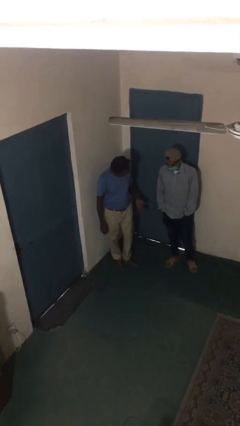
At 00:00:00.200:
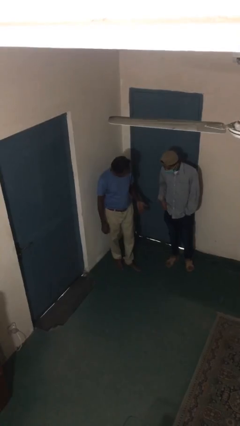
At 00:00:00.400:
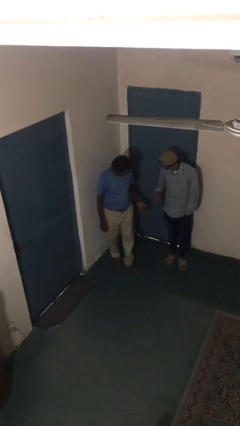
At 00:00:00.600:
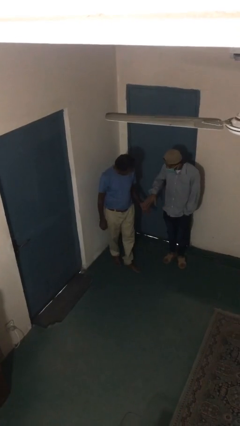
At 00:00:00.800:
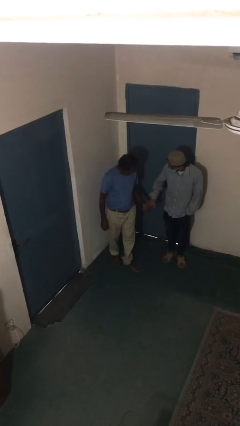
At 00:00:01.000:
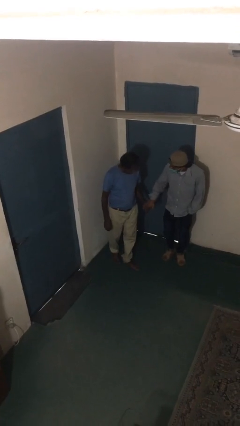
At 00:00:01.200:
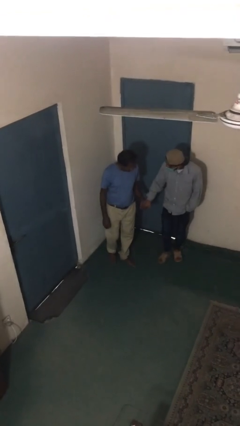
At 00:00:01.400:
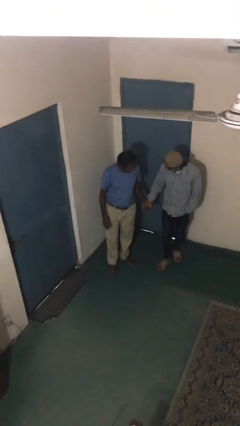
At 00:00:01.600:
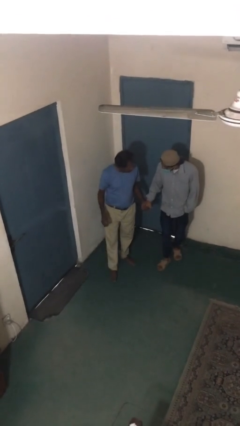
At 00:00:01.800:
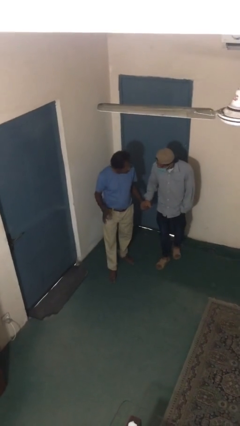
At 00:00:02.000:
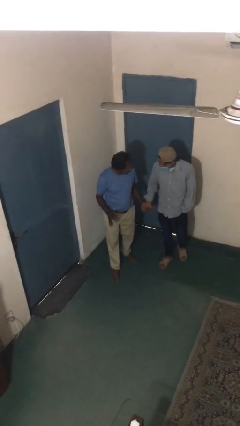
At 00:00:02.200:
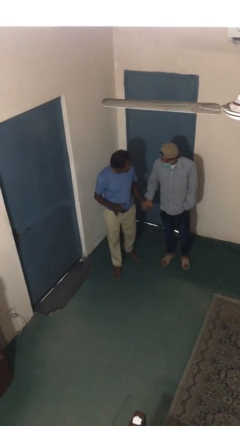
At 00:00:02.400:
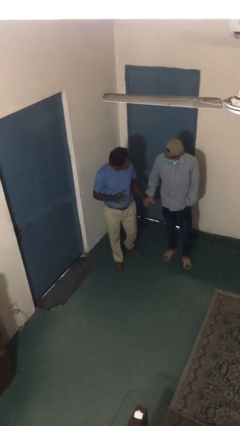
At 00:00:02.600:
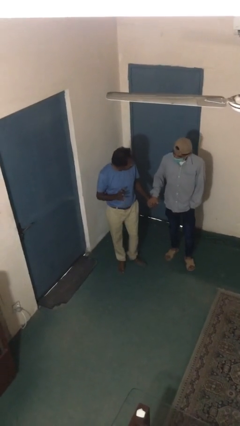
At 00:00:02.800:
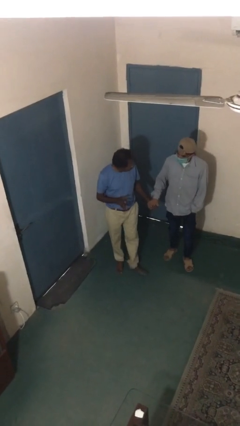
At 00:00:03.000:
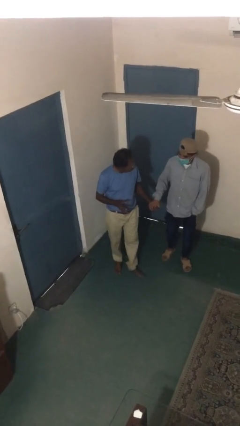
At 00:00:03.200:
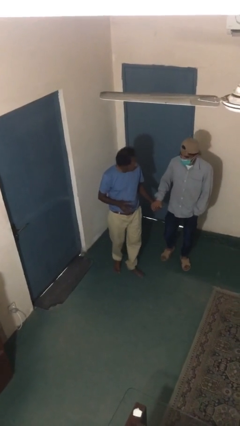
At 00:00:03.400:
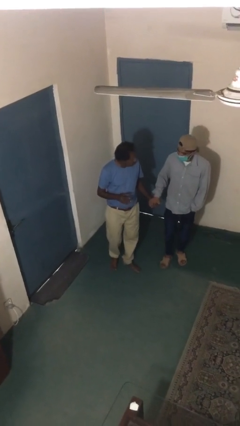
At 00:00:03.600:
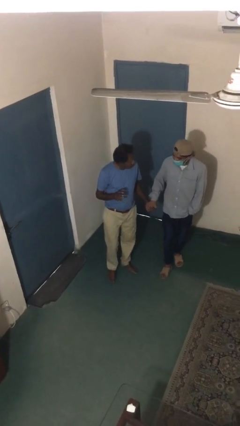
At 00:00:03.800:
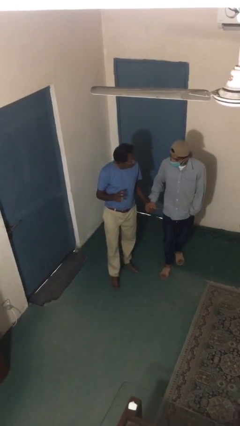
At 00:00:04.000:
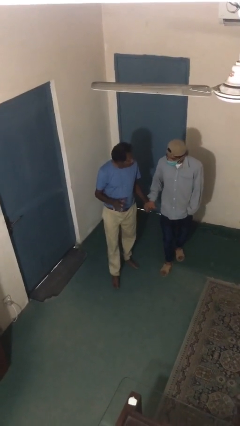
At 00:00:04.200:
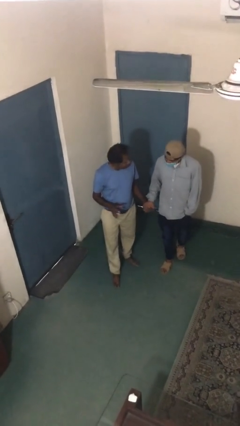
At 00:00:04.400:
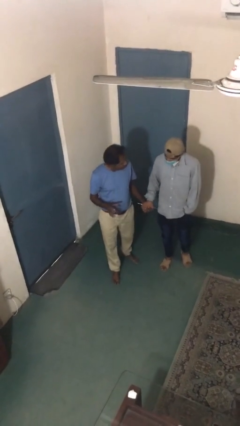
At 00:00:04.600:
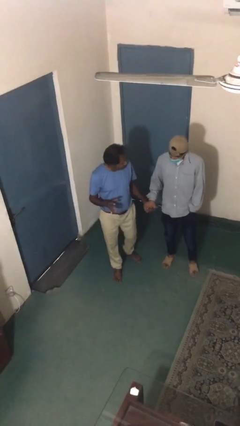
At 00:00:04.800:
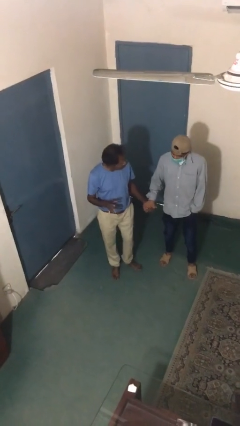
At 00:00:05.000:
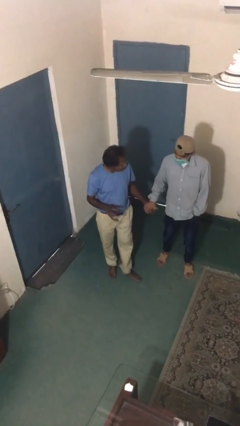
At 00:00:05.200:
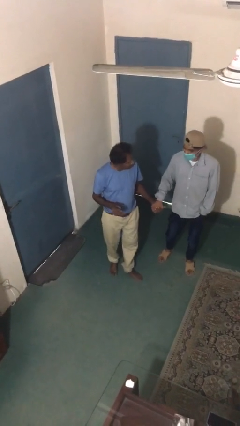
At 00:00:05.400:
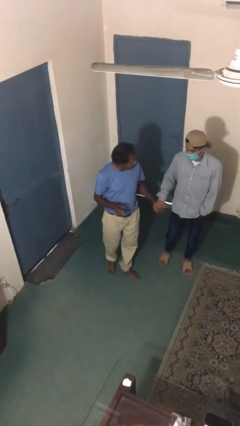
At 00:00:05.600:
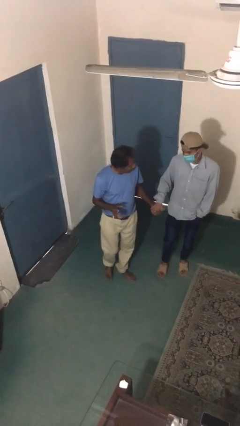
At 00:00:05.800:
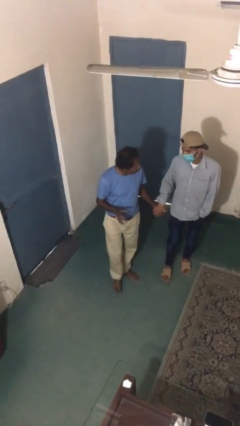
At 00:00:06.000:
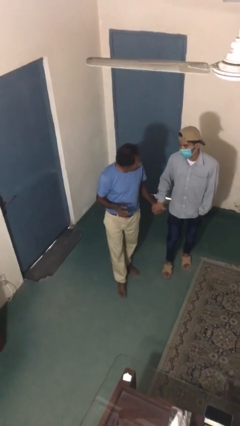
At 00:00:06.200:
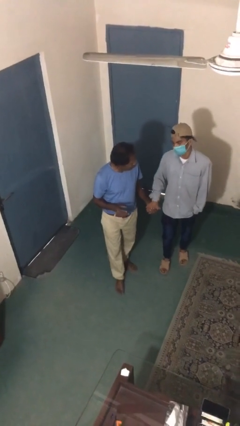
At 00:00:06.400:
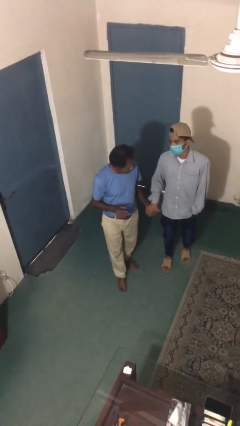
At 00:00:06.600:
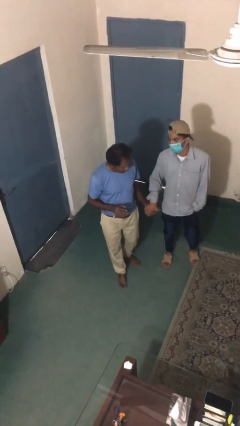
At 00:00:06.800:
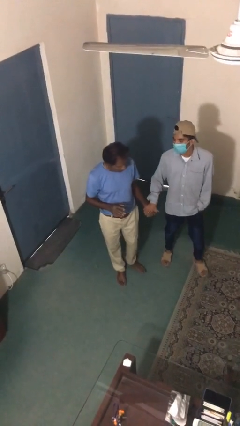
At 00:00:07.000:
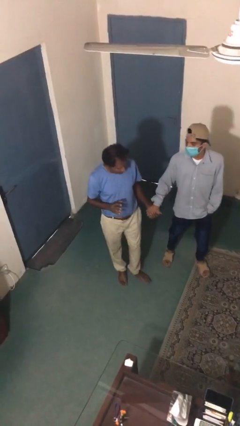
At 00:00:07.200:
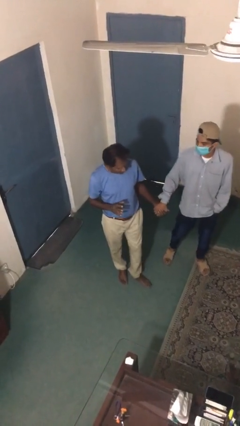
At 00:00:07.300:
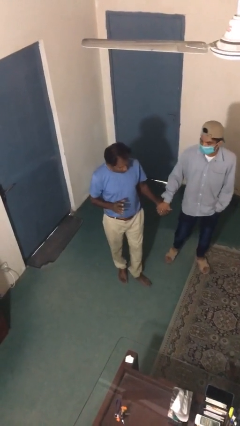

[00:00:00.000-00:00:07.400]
person holds hand

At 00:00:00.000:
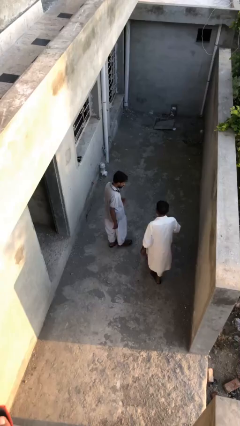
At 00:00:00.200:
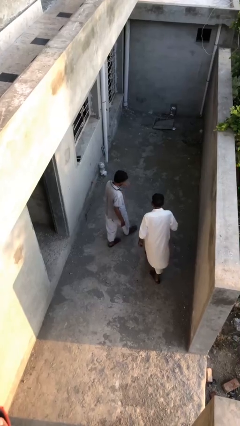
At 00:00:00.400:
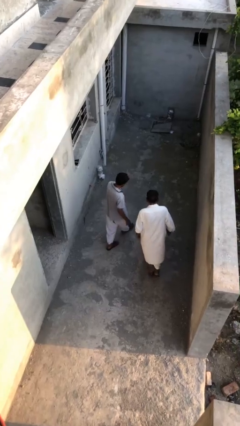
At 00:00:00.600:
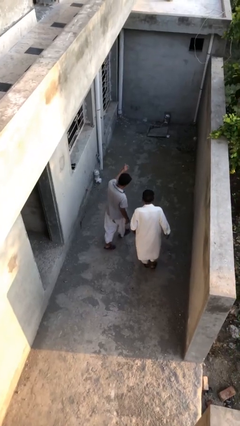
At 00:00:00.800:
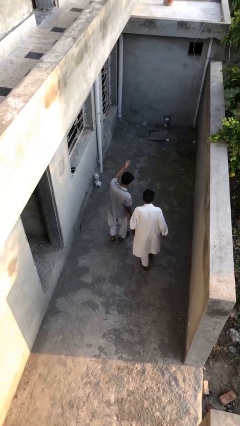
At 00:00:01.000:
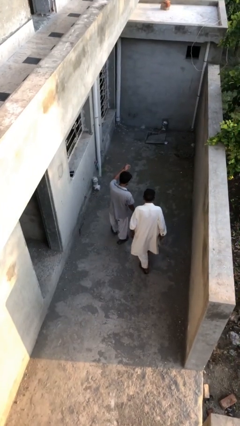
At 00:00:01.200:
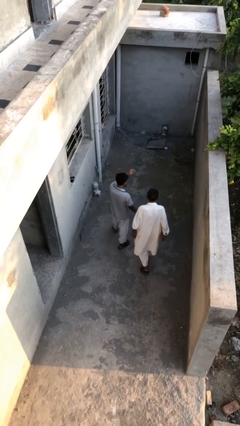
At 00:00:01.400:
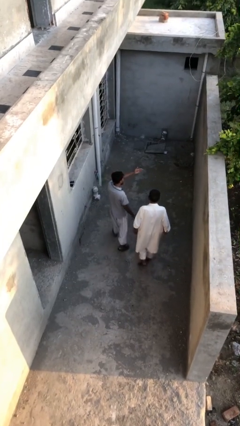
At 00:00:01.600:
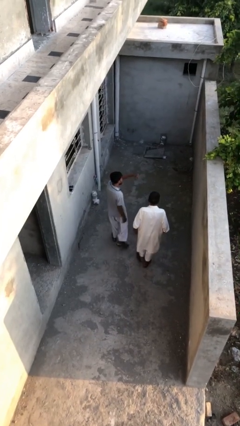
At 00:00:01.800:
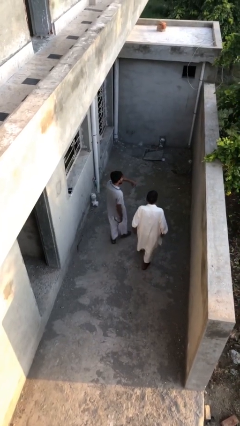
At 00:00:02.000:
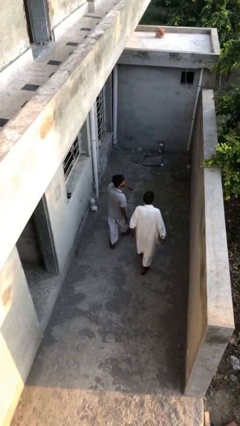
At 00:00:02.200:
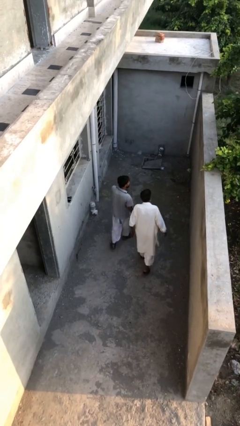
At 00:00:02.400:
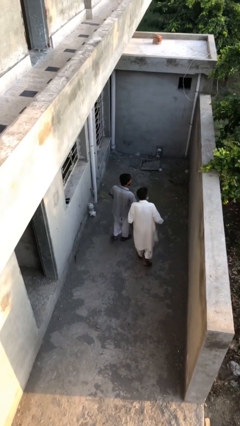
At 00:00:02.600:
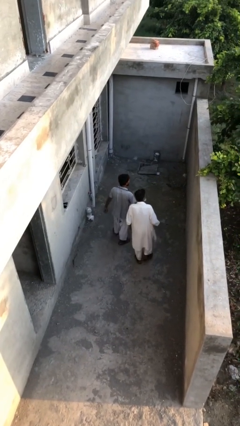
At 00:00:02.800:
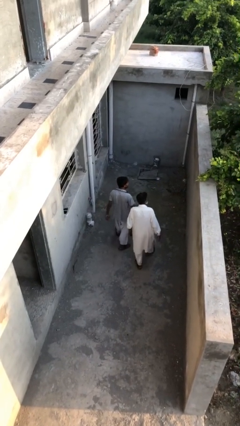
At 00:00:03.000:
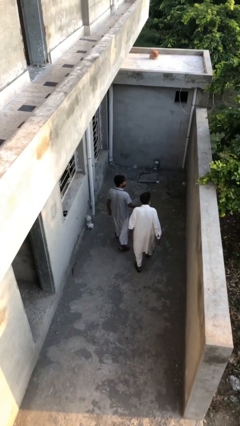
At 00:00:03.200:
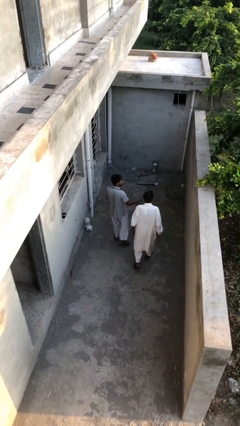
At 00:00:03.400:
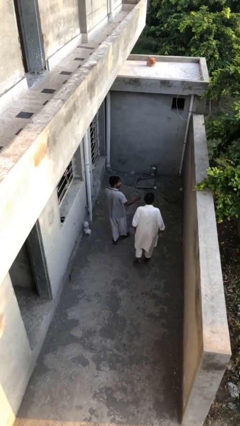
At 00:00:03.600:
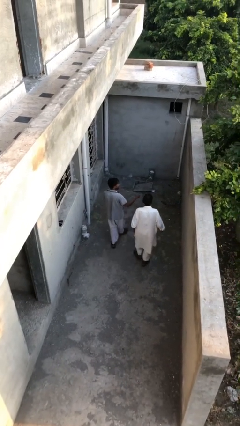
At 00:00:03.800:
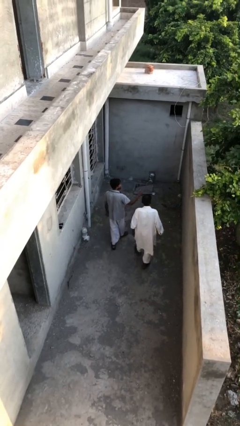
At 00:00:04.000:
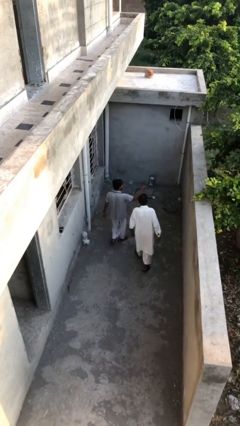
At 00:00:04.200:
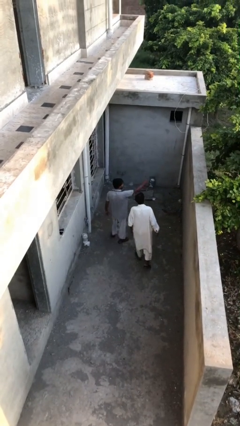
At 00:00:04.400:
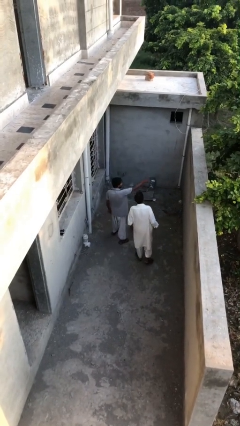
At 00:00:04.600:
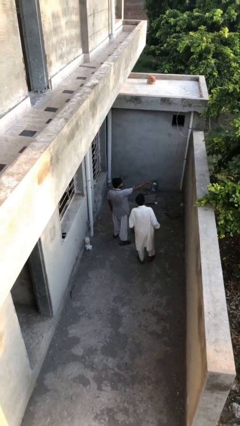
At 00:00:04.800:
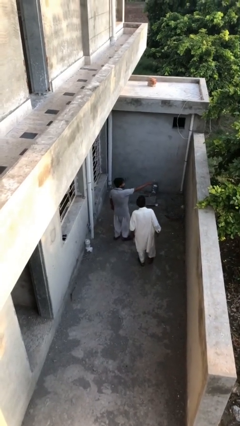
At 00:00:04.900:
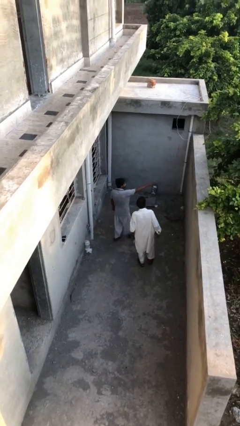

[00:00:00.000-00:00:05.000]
person talks to person

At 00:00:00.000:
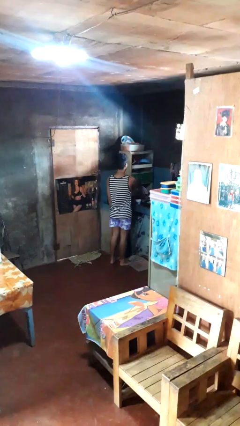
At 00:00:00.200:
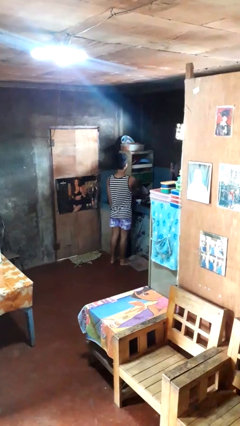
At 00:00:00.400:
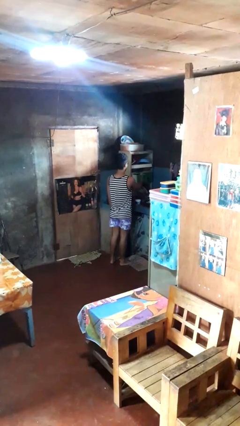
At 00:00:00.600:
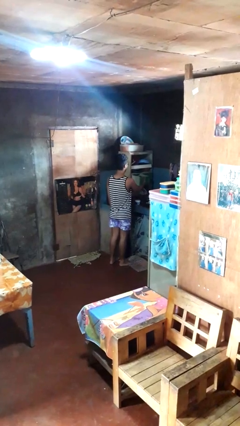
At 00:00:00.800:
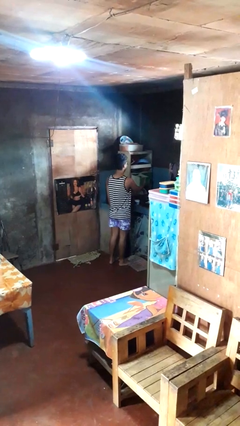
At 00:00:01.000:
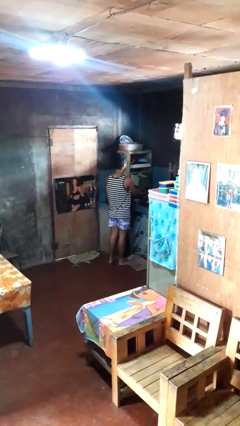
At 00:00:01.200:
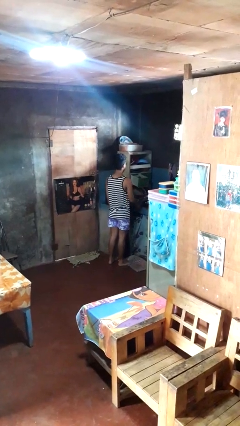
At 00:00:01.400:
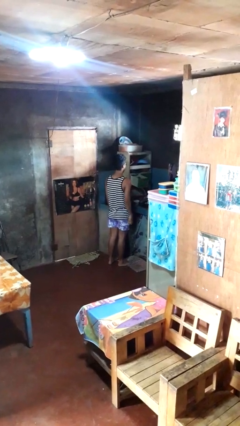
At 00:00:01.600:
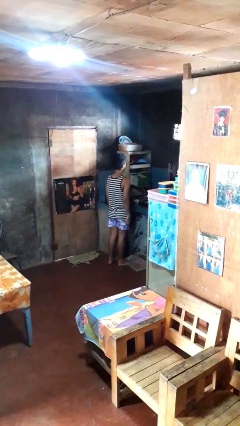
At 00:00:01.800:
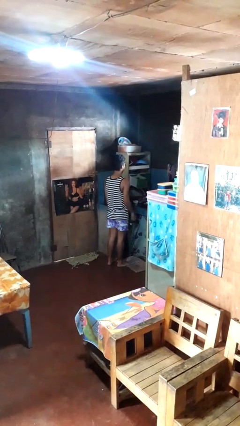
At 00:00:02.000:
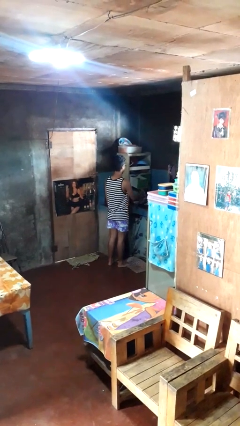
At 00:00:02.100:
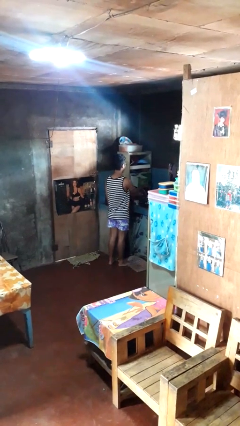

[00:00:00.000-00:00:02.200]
person opens kitchen drawer

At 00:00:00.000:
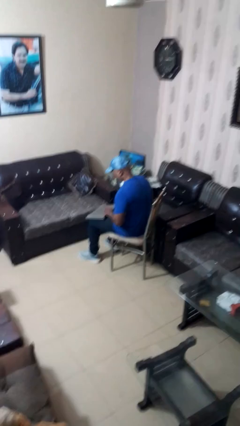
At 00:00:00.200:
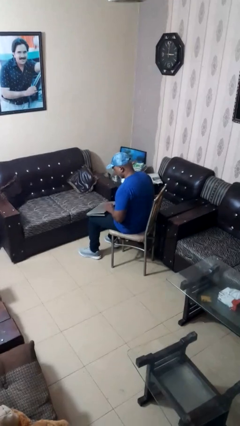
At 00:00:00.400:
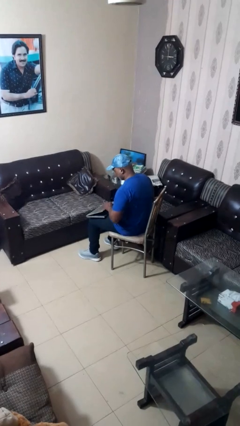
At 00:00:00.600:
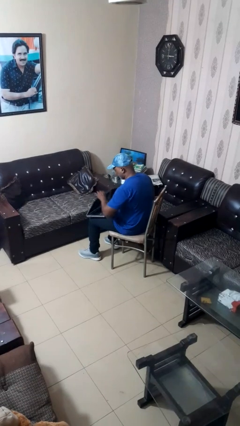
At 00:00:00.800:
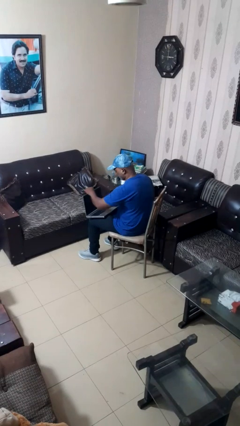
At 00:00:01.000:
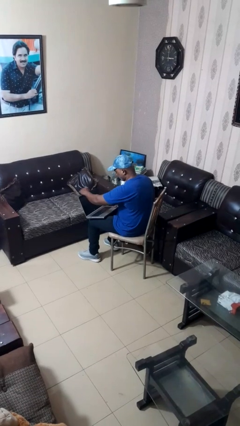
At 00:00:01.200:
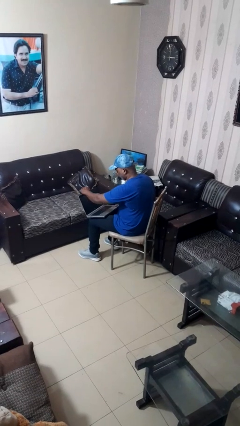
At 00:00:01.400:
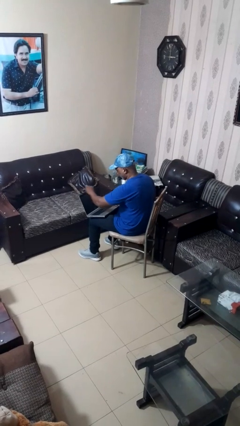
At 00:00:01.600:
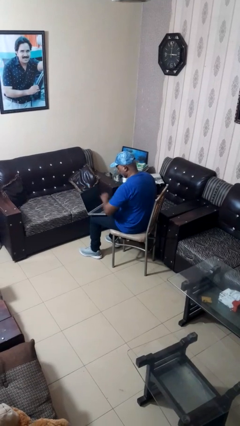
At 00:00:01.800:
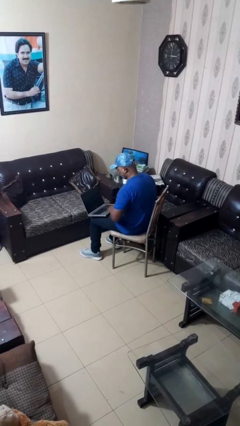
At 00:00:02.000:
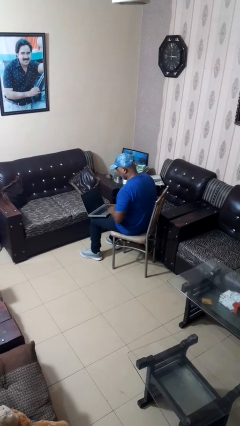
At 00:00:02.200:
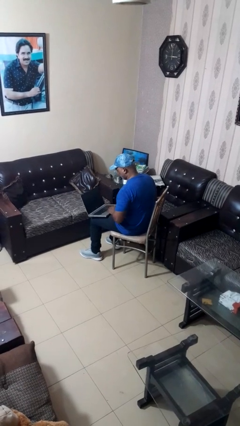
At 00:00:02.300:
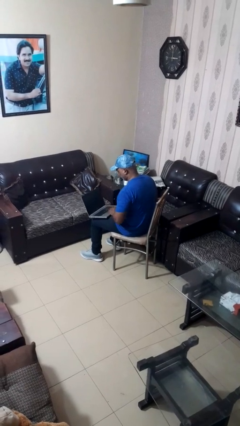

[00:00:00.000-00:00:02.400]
person opens laptop

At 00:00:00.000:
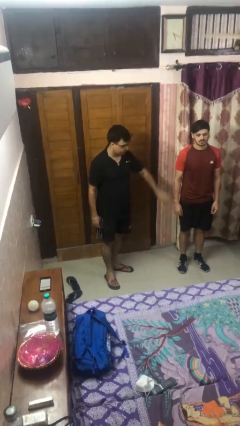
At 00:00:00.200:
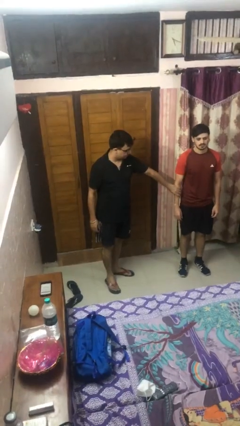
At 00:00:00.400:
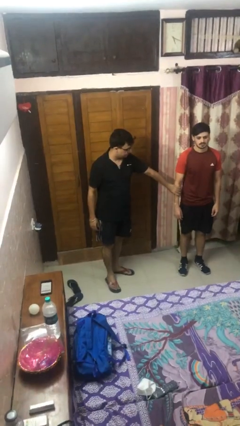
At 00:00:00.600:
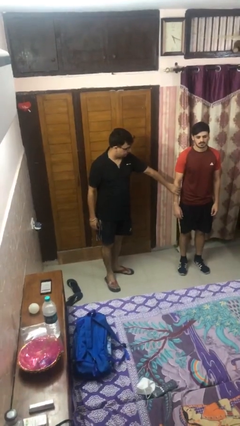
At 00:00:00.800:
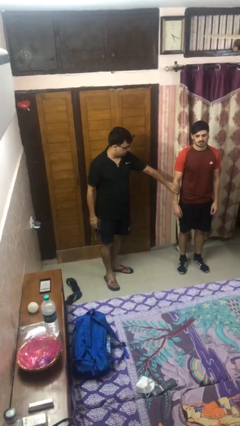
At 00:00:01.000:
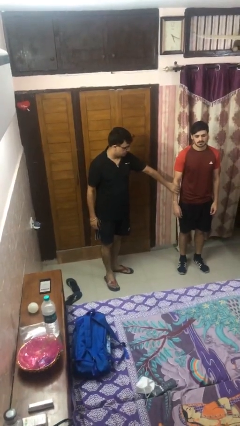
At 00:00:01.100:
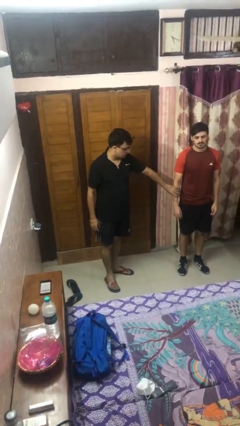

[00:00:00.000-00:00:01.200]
person grabs person by forearm
